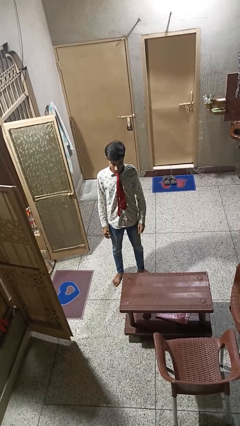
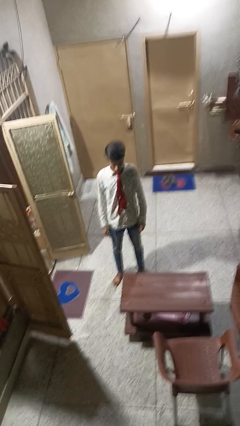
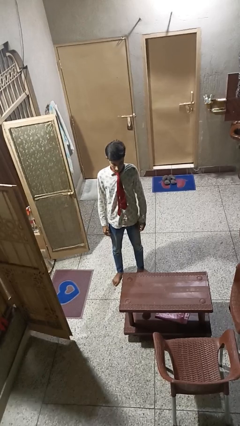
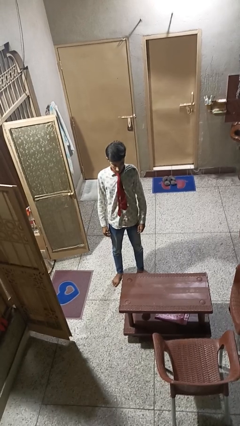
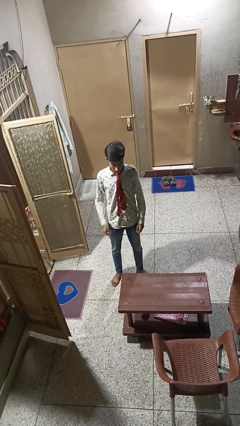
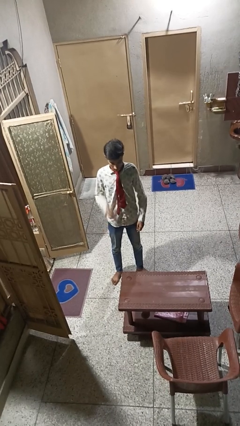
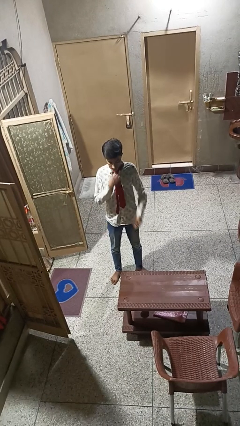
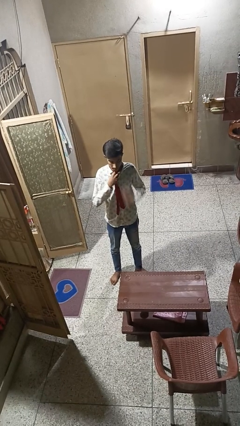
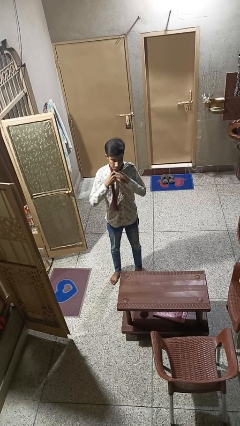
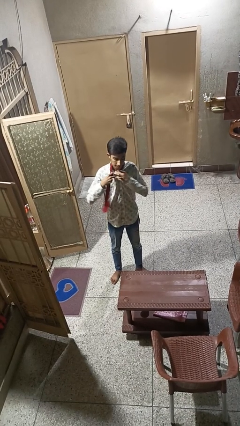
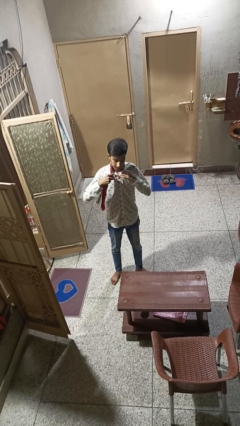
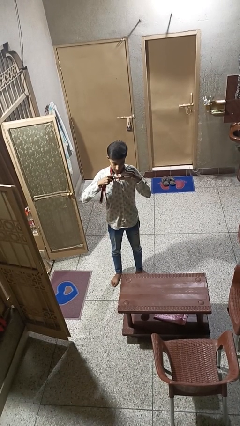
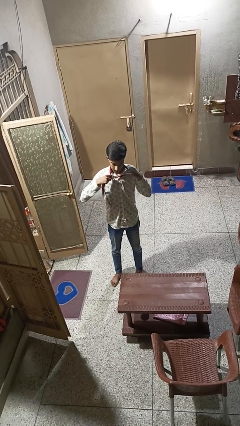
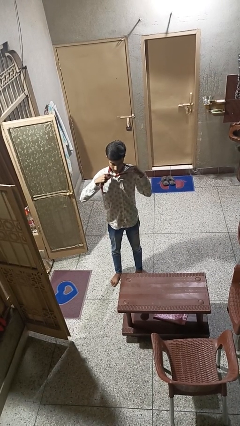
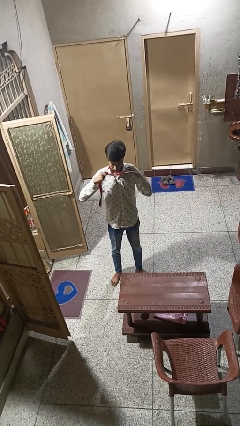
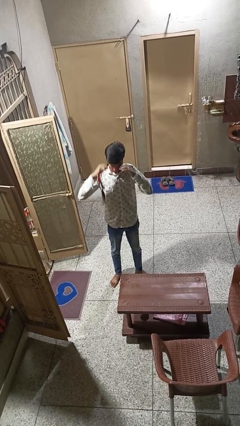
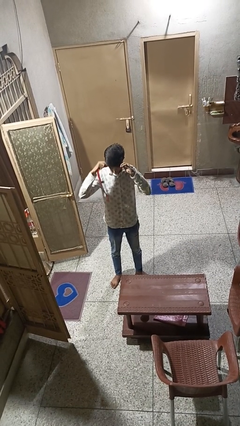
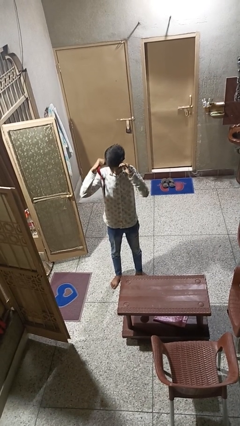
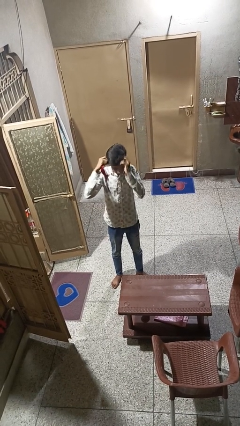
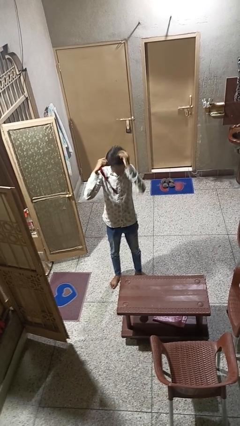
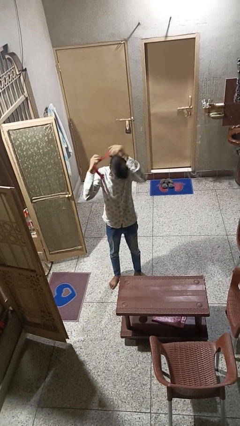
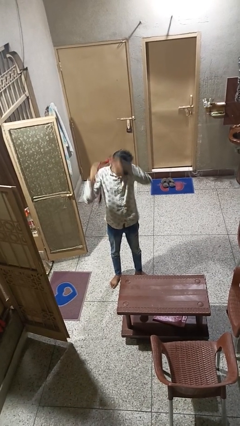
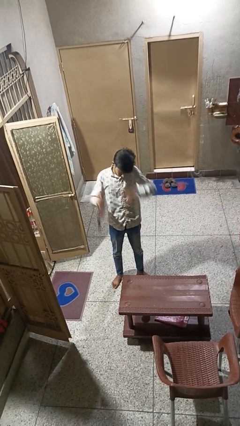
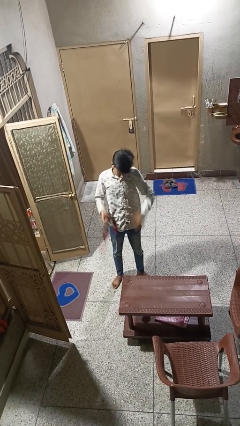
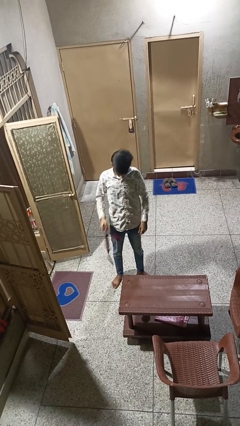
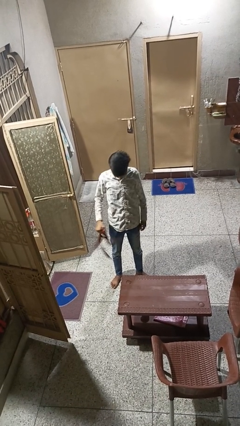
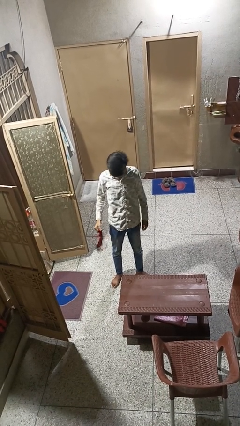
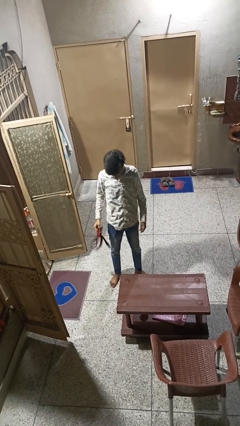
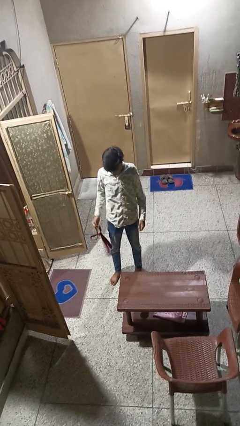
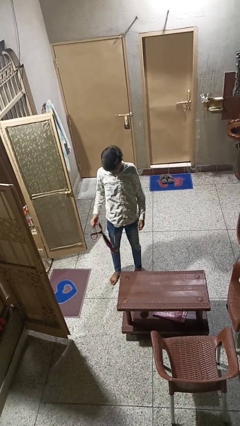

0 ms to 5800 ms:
person takes off necktie

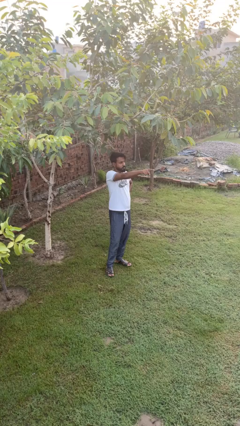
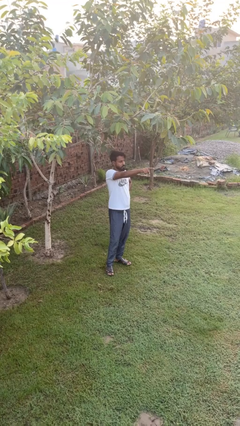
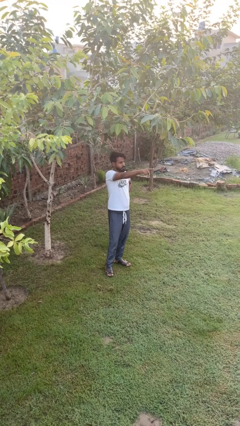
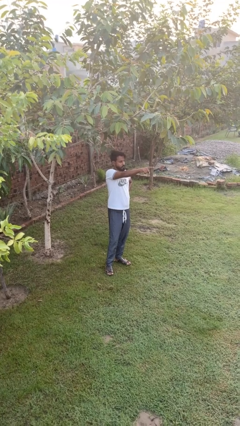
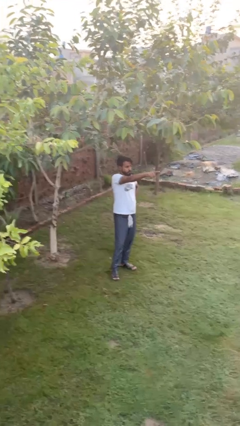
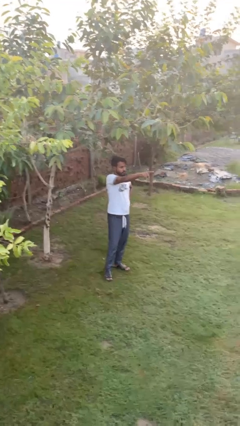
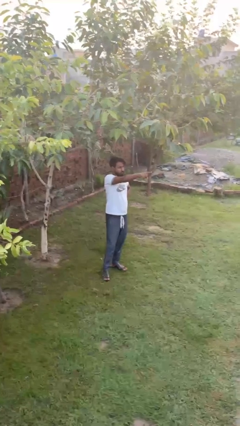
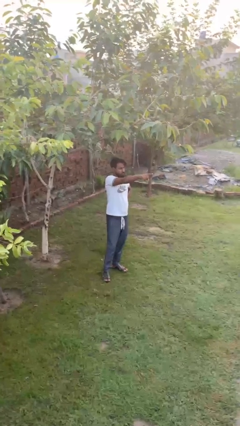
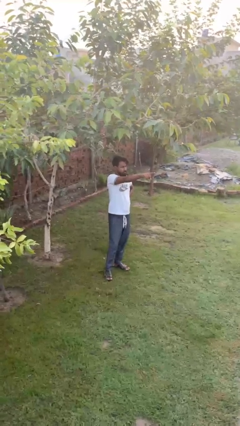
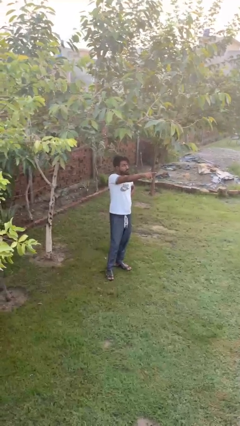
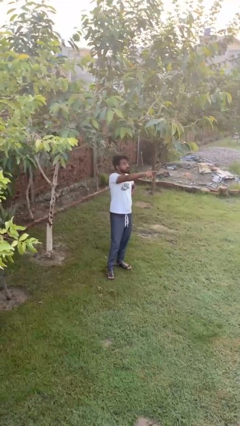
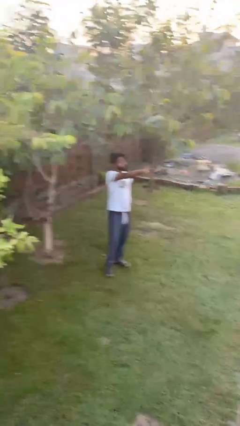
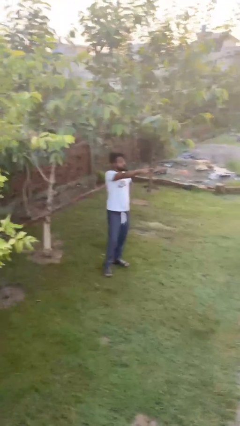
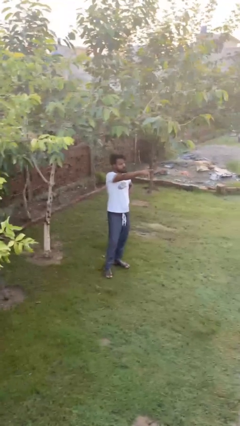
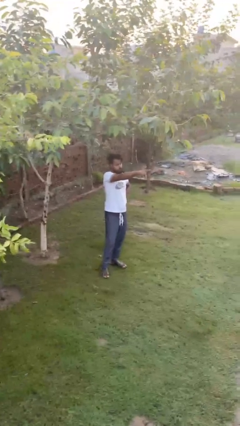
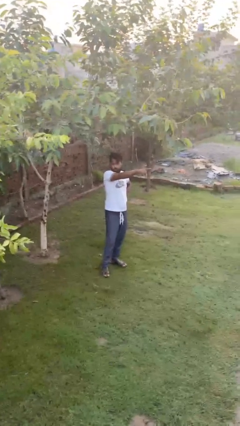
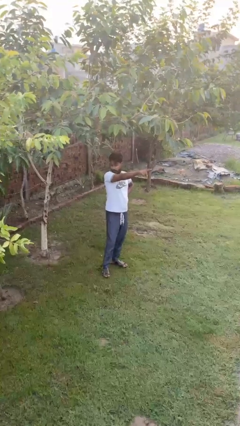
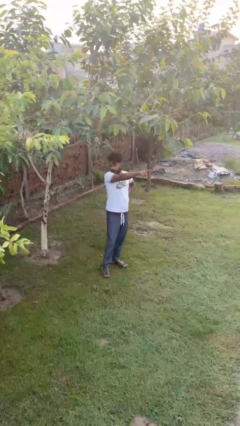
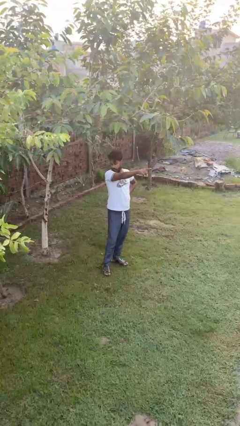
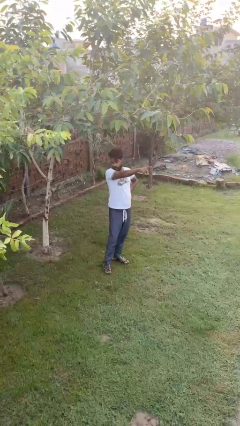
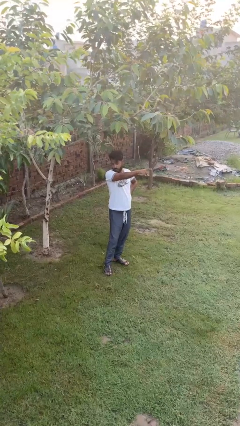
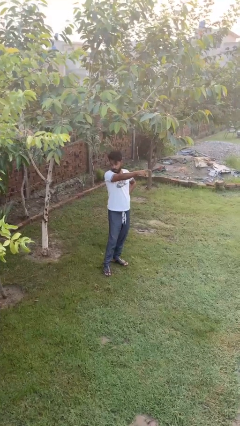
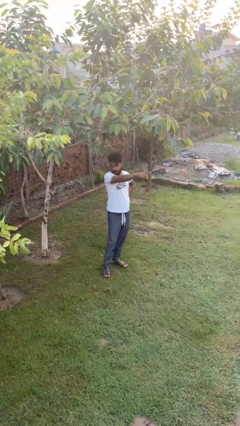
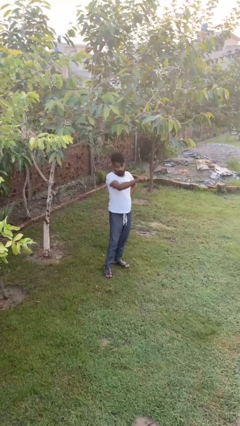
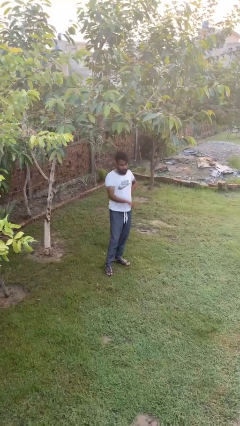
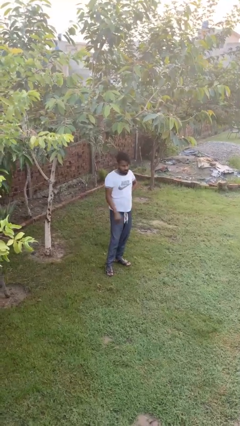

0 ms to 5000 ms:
person points at person

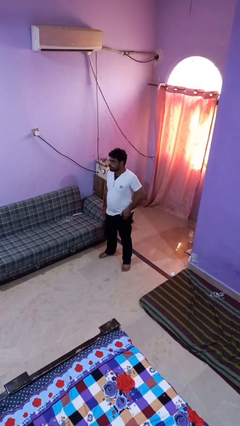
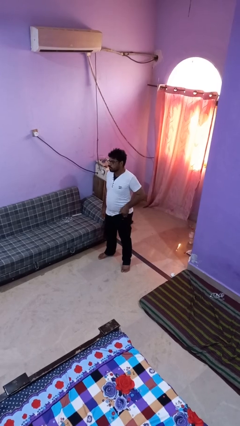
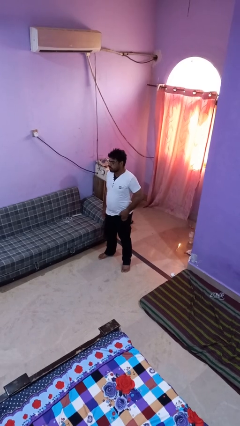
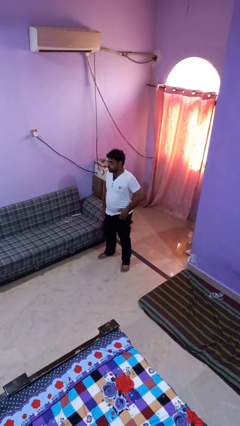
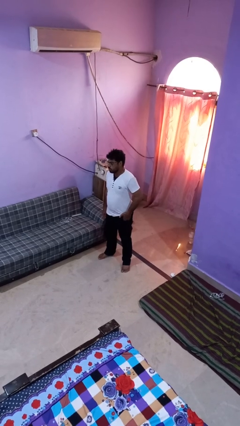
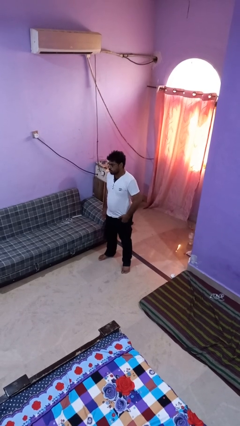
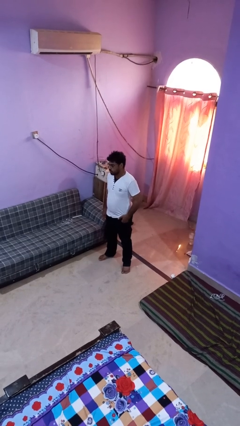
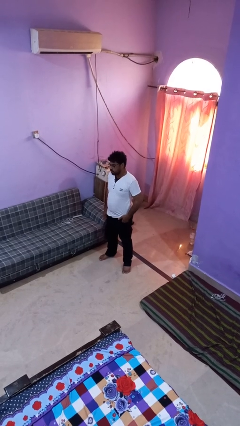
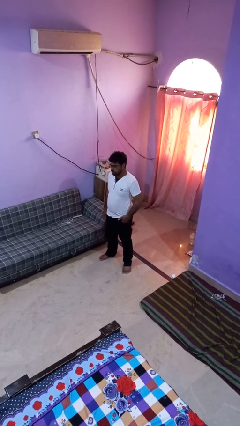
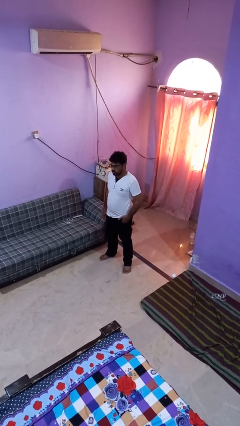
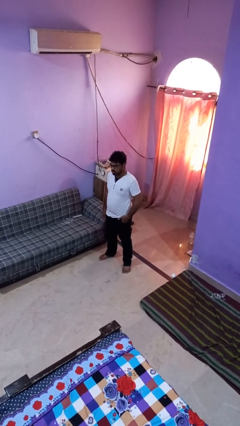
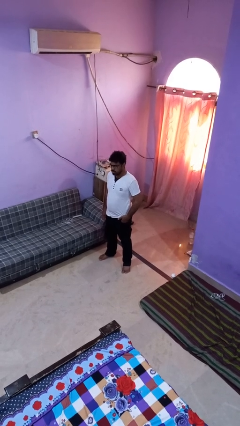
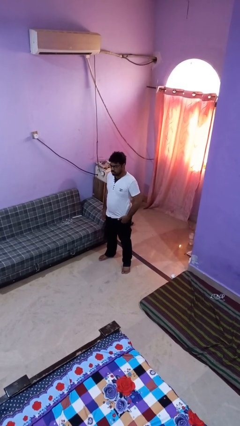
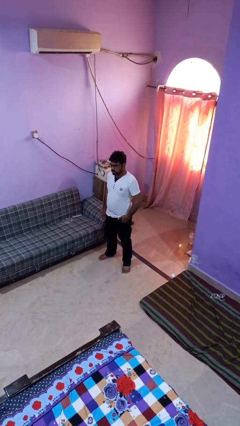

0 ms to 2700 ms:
person puts hands in back pockets

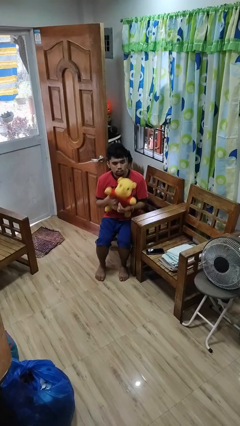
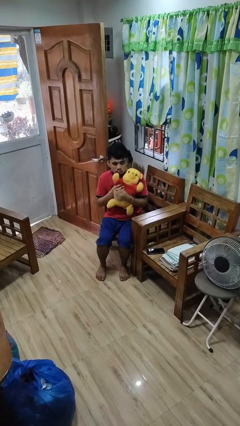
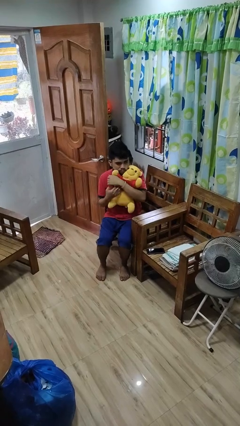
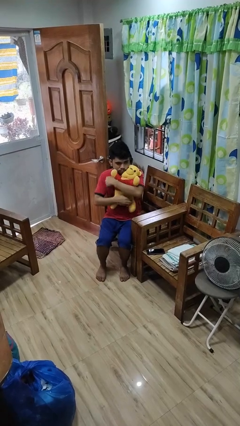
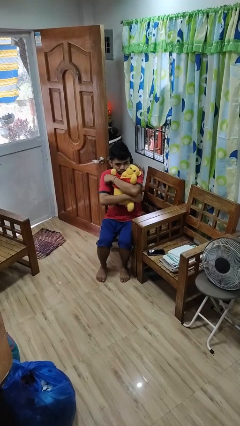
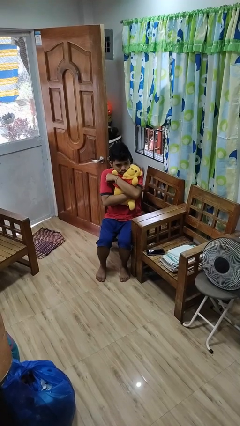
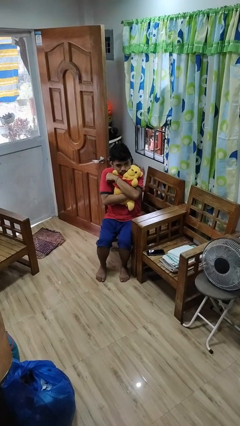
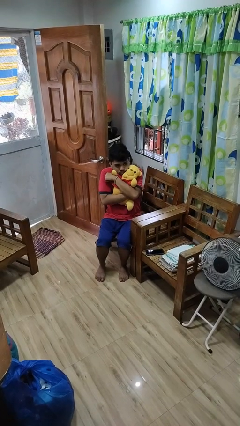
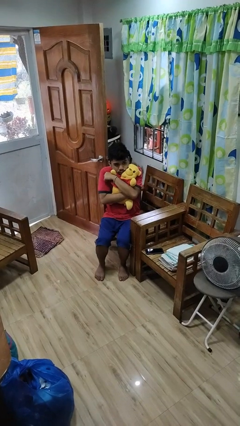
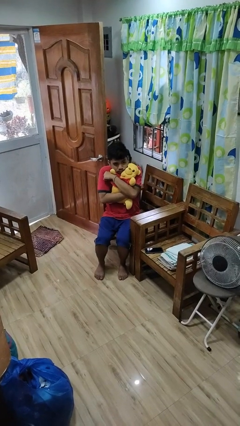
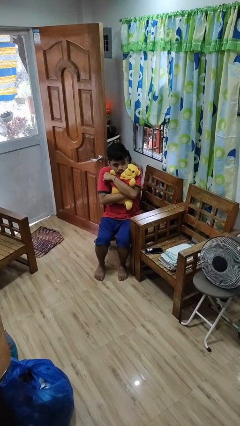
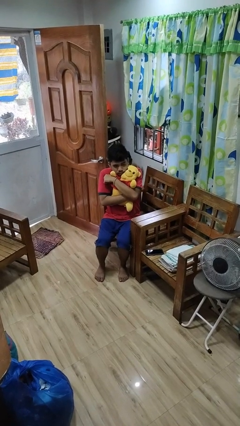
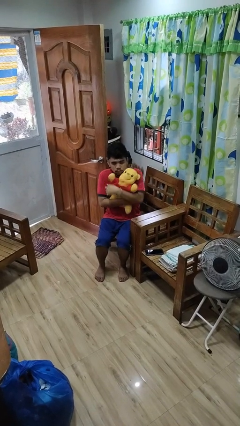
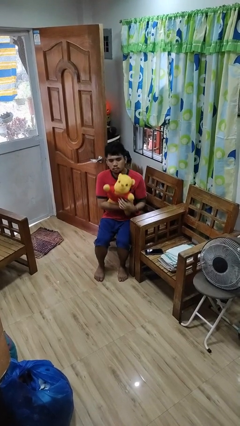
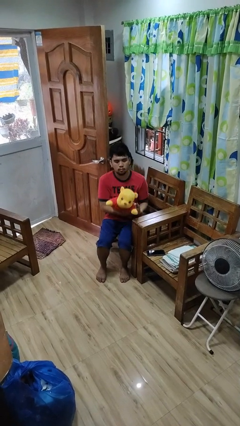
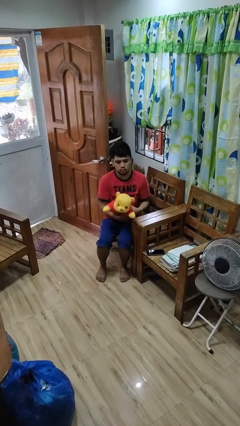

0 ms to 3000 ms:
person hugs stuffed animal

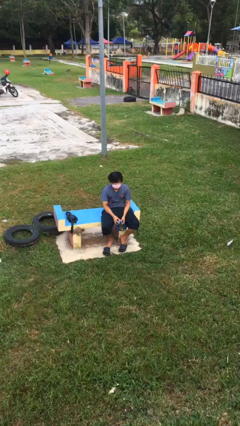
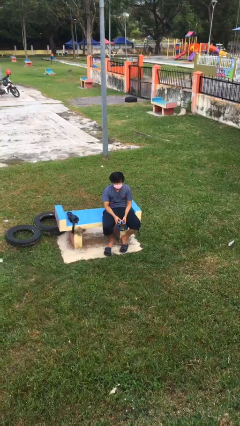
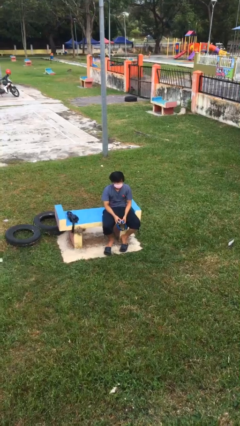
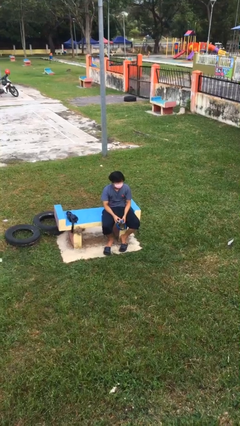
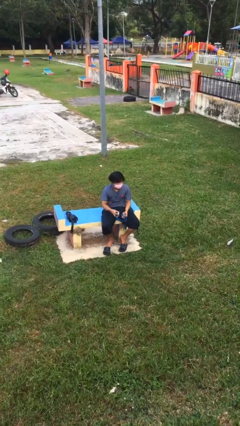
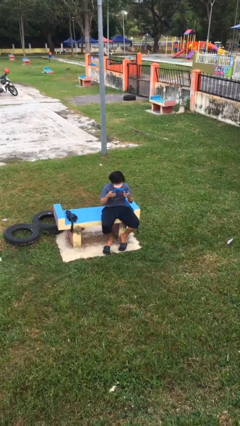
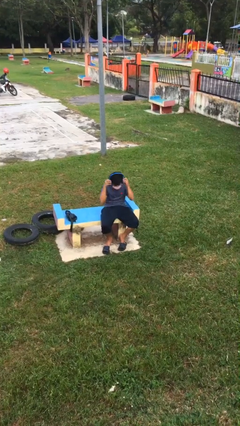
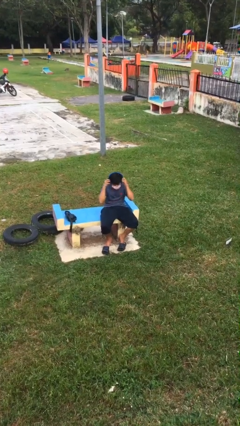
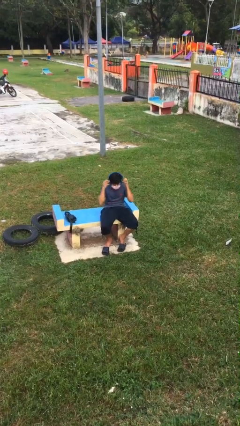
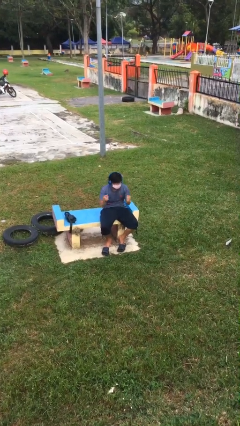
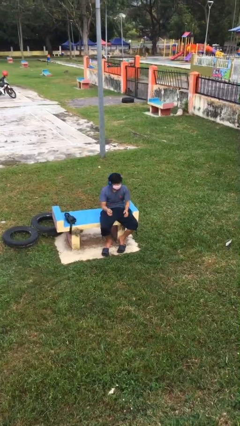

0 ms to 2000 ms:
person puts on headphones
